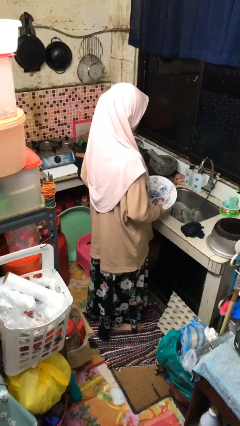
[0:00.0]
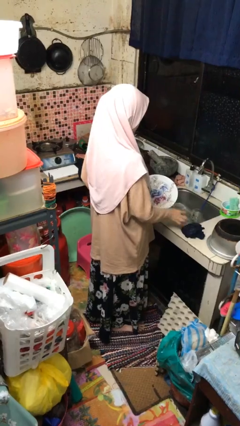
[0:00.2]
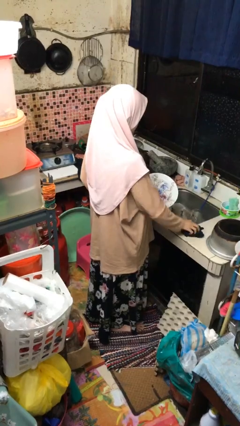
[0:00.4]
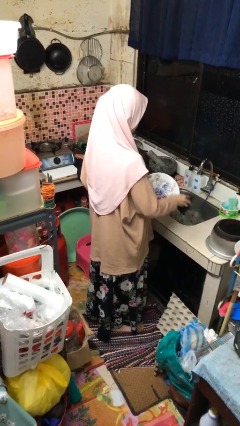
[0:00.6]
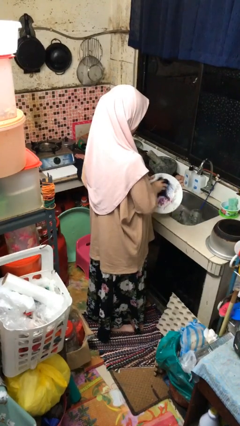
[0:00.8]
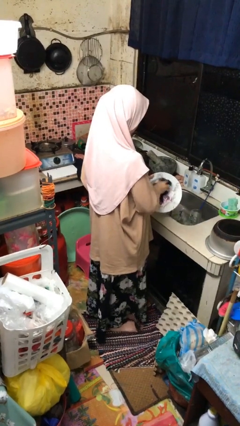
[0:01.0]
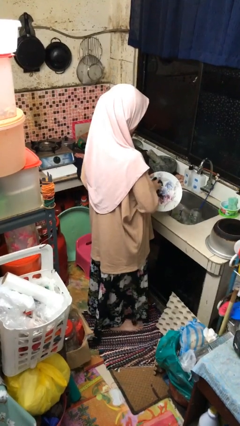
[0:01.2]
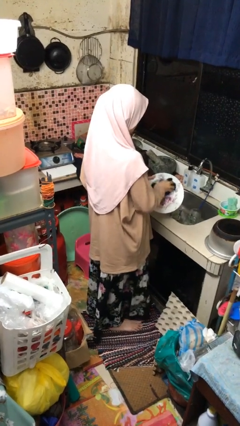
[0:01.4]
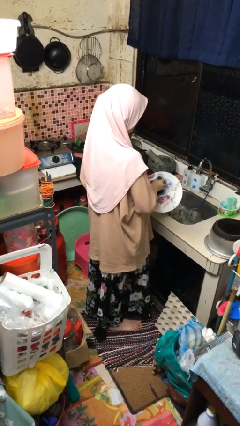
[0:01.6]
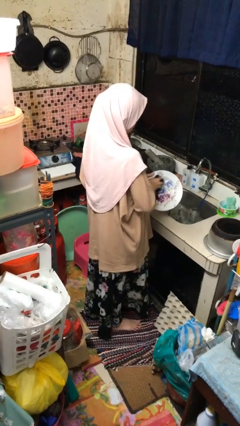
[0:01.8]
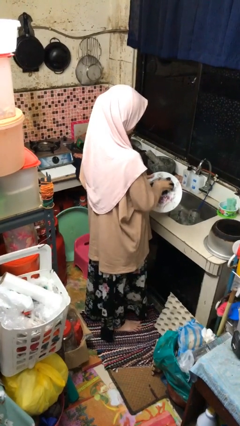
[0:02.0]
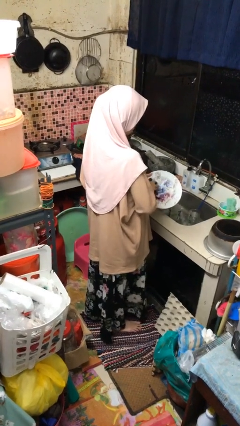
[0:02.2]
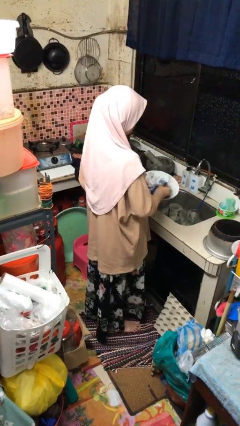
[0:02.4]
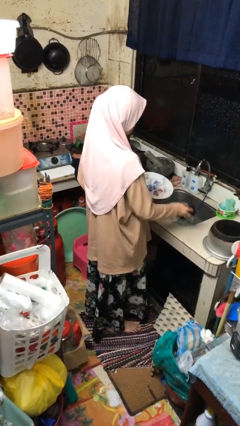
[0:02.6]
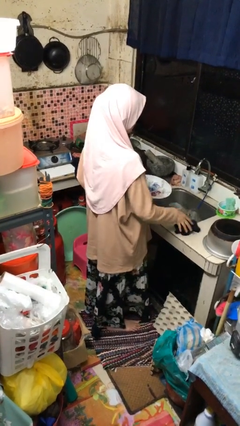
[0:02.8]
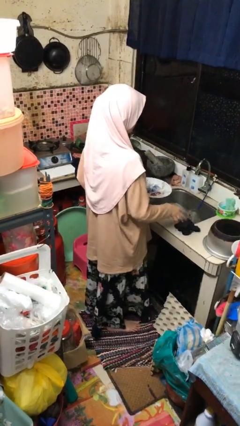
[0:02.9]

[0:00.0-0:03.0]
person dries dish

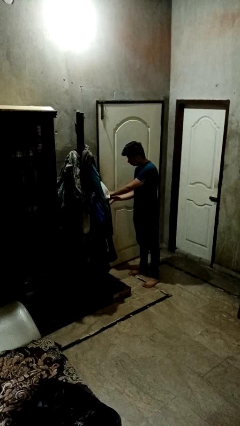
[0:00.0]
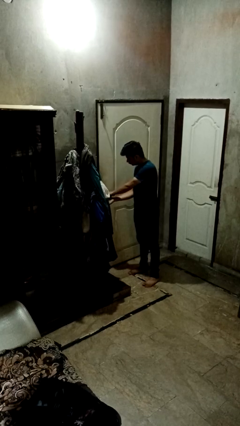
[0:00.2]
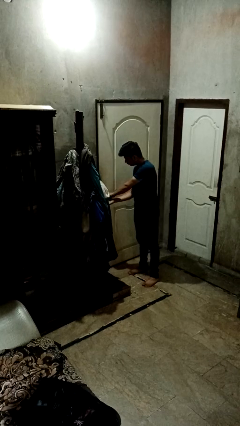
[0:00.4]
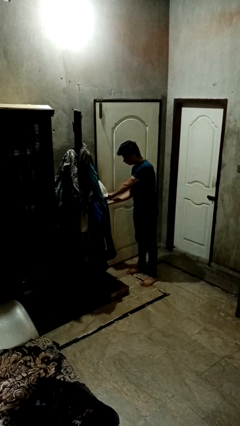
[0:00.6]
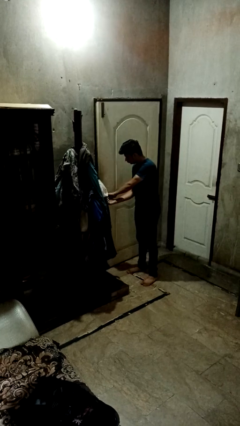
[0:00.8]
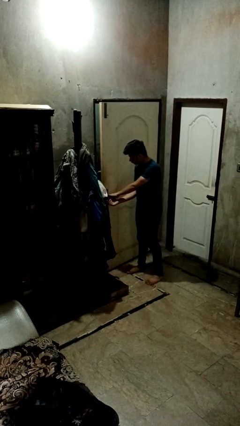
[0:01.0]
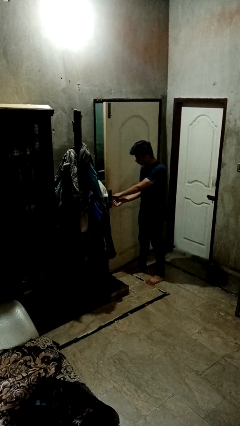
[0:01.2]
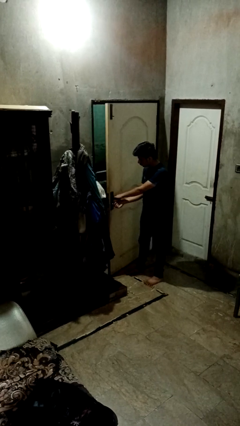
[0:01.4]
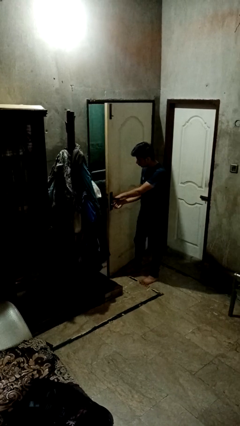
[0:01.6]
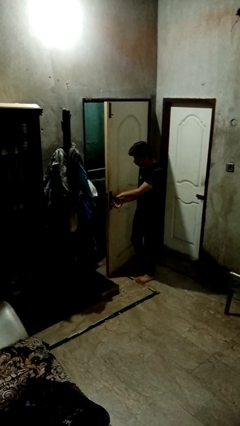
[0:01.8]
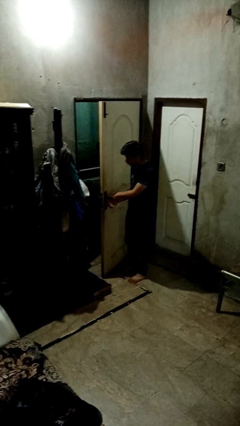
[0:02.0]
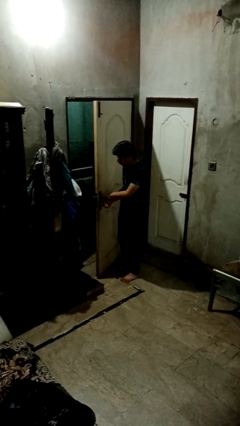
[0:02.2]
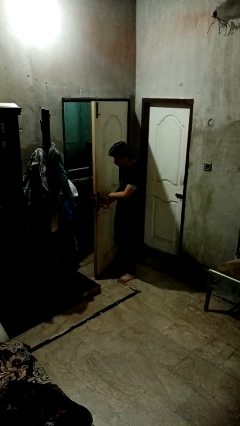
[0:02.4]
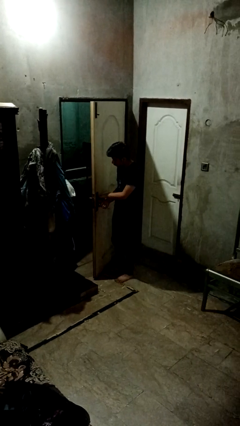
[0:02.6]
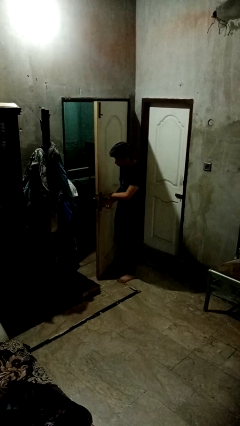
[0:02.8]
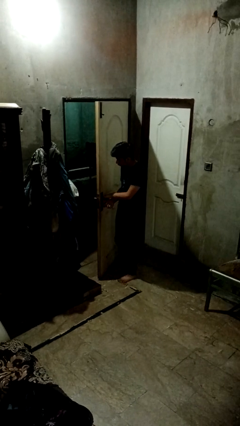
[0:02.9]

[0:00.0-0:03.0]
person opens facility door

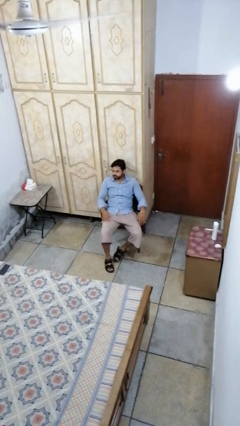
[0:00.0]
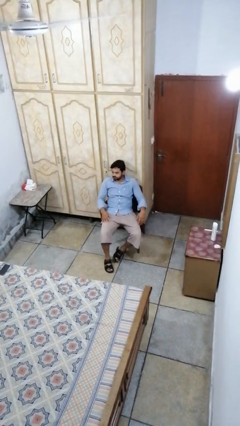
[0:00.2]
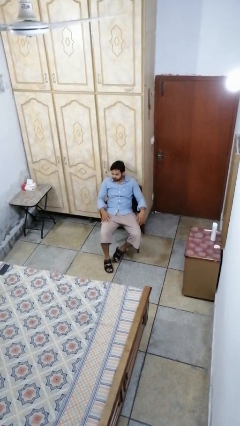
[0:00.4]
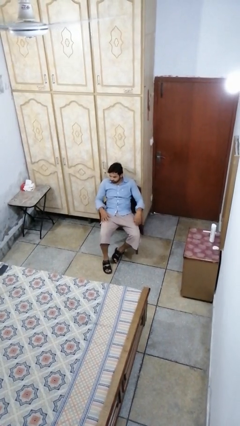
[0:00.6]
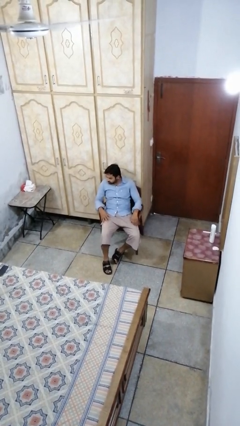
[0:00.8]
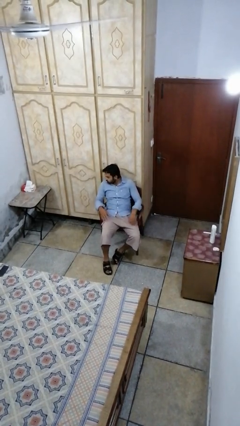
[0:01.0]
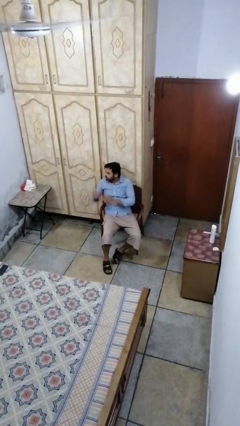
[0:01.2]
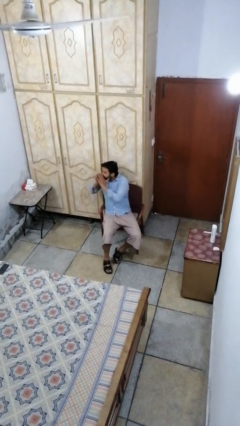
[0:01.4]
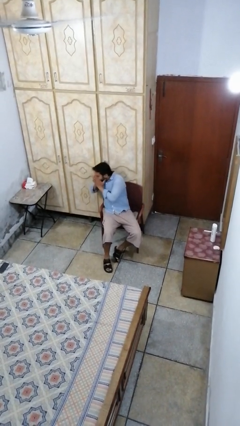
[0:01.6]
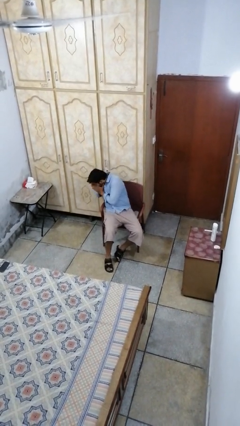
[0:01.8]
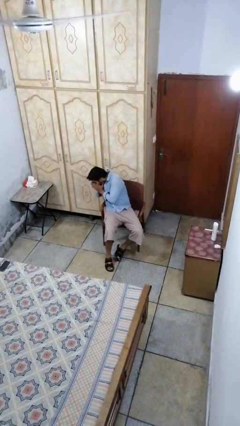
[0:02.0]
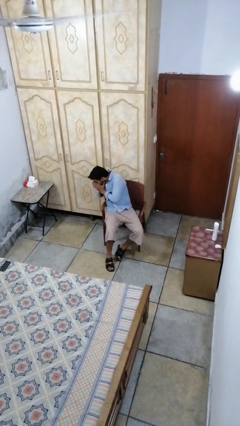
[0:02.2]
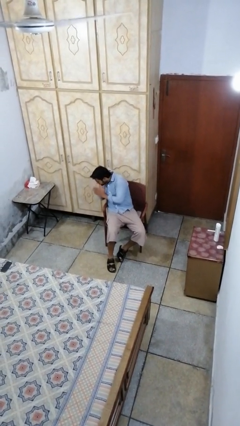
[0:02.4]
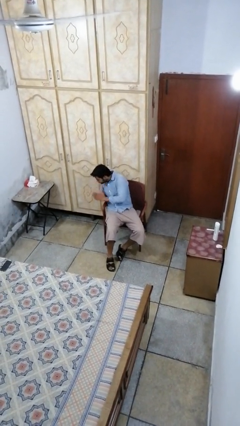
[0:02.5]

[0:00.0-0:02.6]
person sneezes into hand

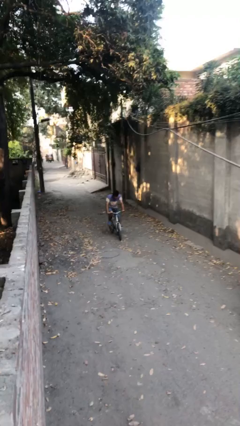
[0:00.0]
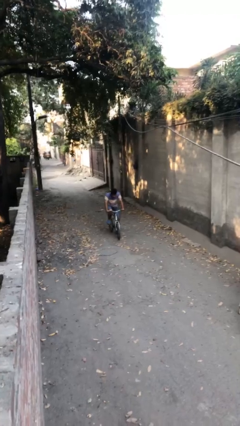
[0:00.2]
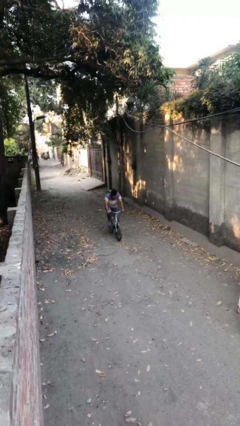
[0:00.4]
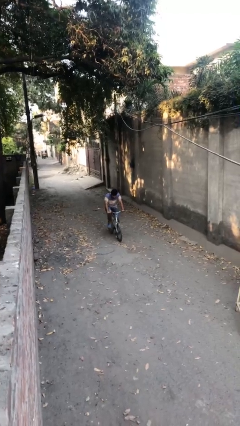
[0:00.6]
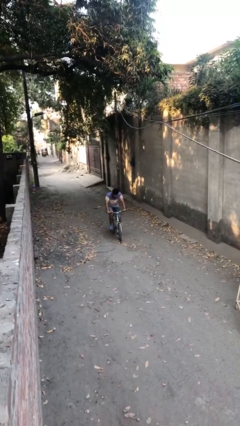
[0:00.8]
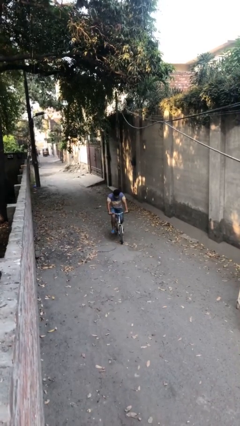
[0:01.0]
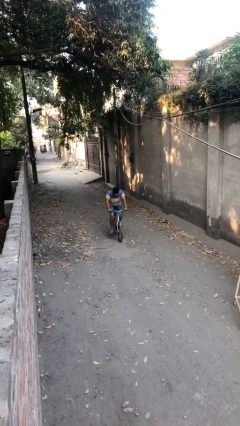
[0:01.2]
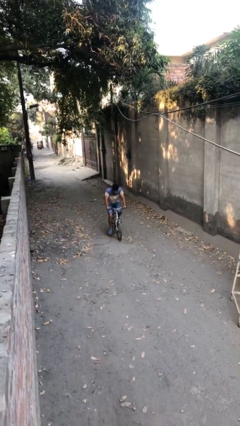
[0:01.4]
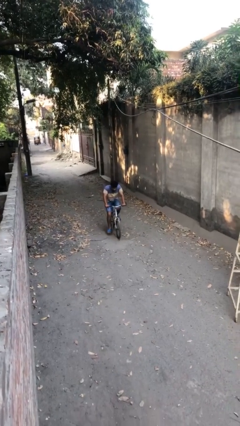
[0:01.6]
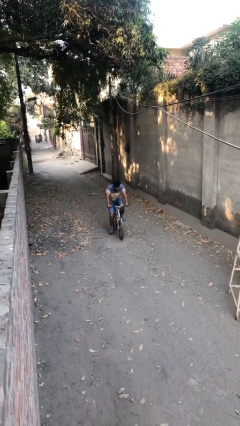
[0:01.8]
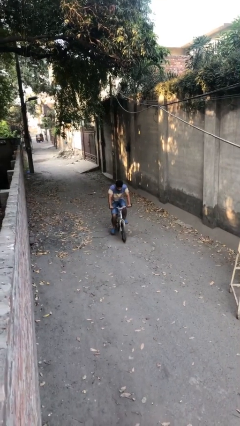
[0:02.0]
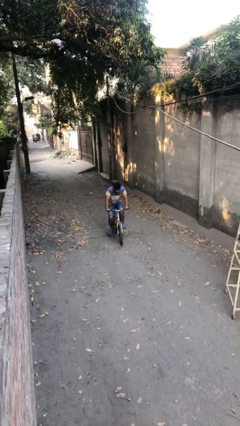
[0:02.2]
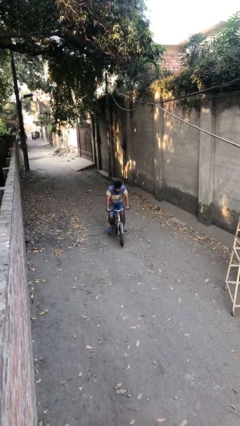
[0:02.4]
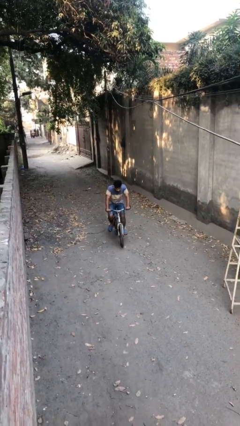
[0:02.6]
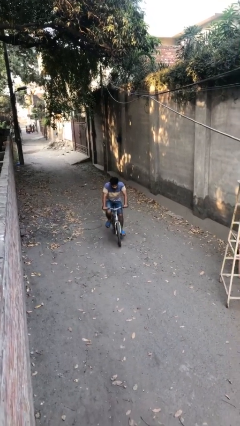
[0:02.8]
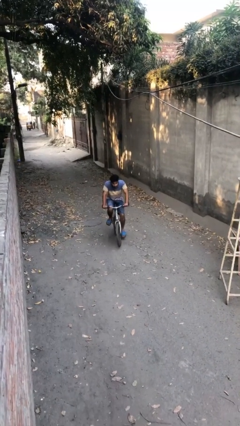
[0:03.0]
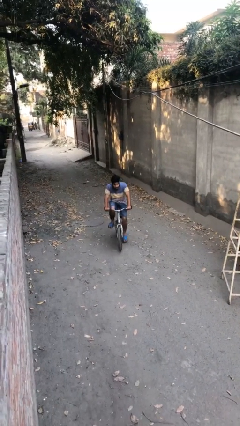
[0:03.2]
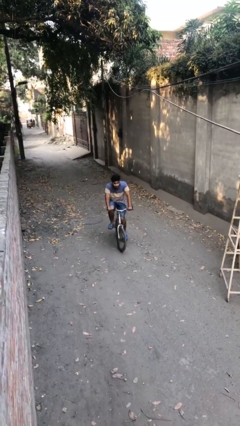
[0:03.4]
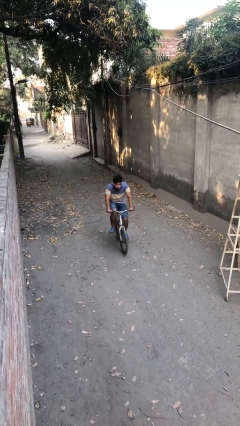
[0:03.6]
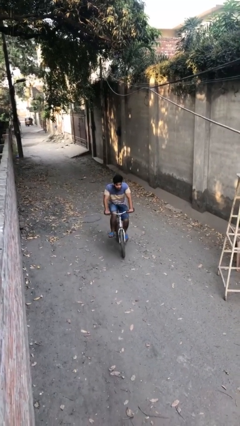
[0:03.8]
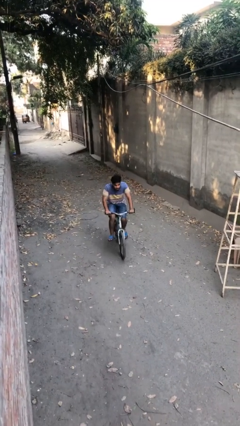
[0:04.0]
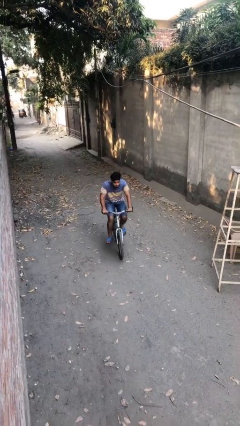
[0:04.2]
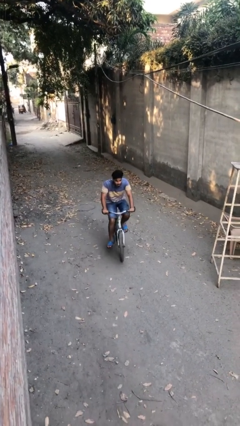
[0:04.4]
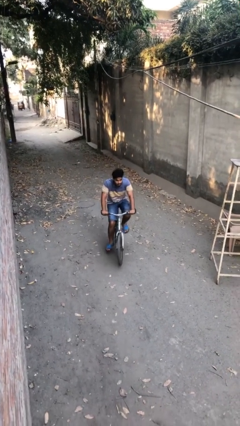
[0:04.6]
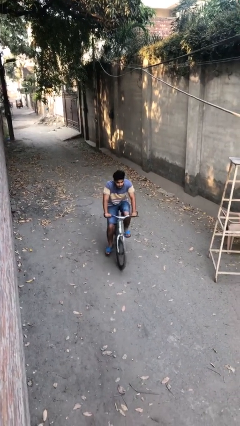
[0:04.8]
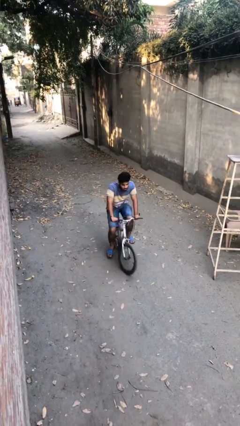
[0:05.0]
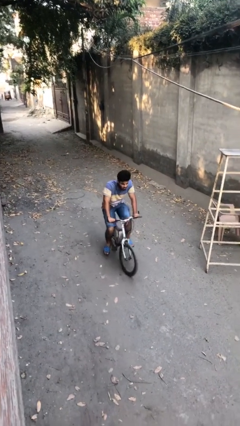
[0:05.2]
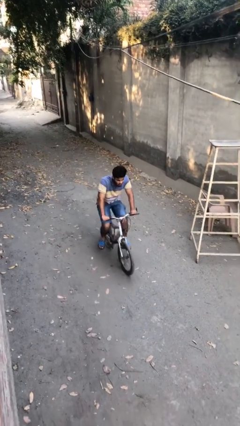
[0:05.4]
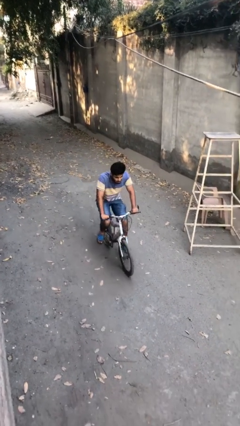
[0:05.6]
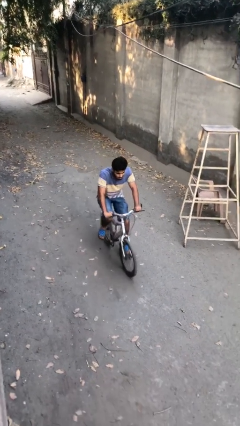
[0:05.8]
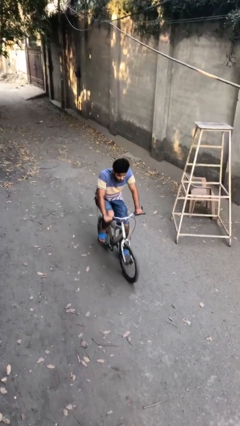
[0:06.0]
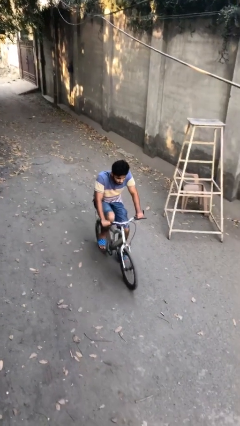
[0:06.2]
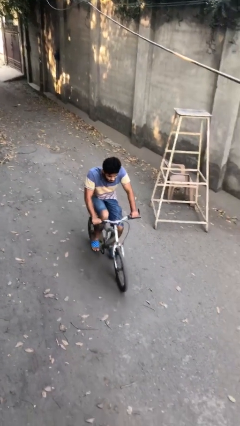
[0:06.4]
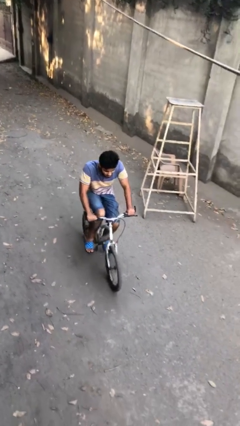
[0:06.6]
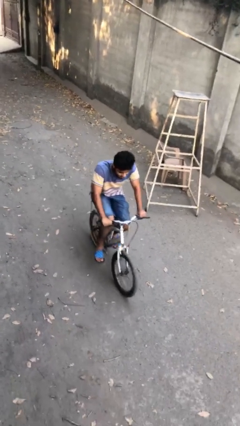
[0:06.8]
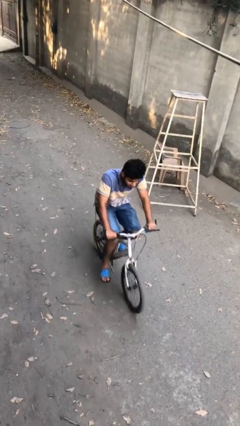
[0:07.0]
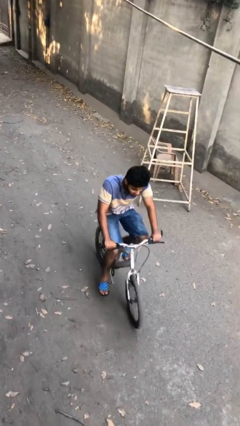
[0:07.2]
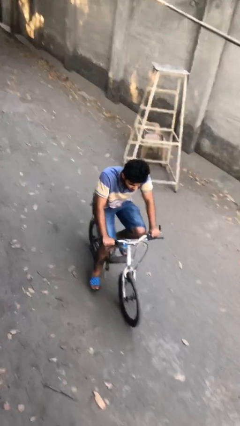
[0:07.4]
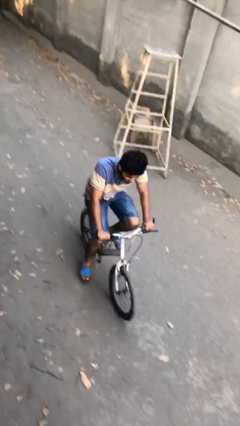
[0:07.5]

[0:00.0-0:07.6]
person rides bicycle

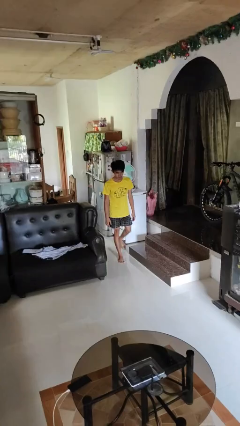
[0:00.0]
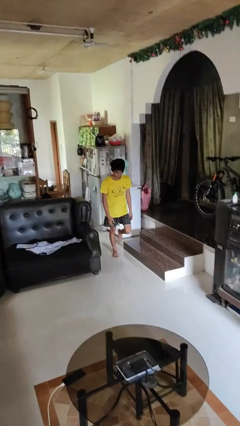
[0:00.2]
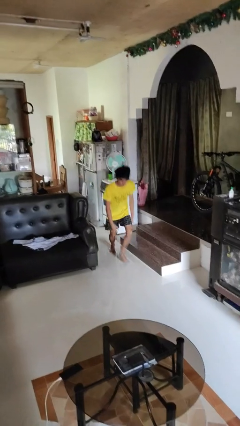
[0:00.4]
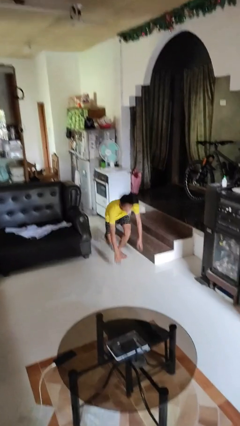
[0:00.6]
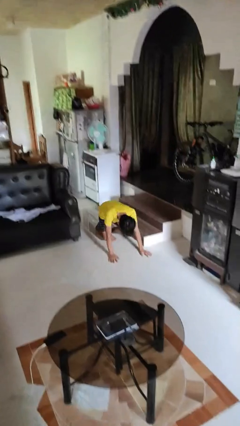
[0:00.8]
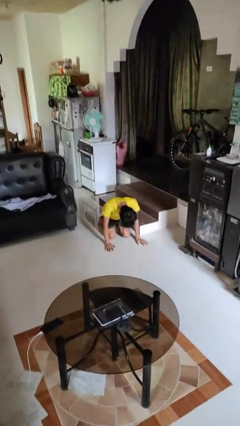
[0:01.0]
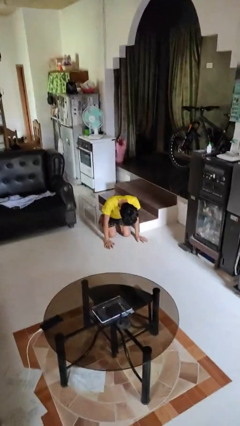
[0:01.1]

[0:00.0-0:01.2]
person trips on object on floor

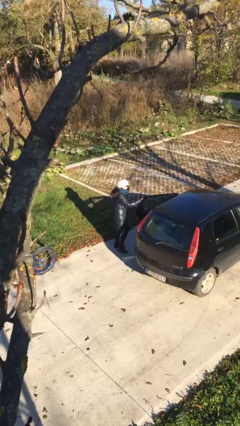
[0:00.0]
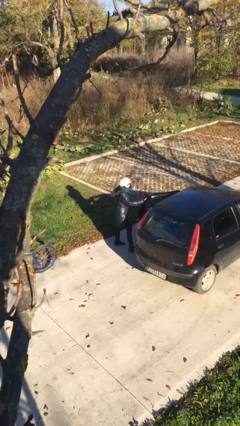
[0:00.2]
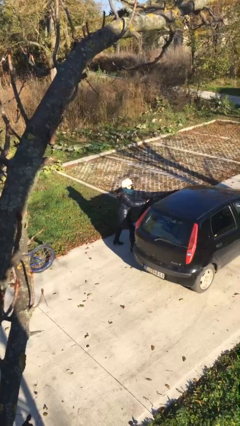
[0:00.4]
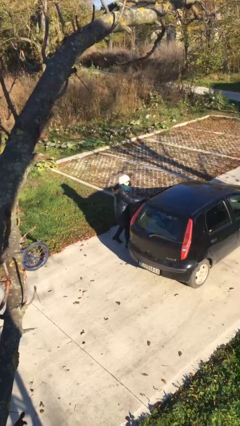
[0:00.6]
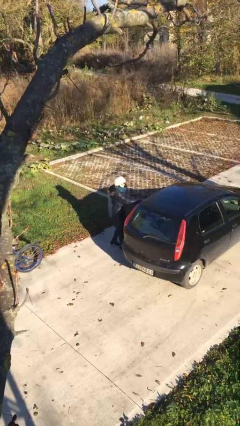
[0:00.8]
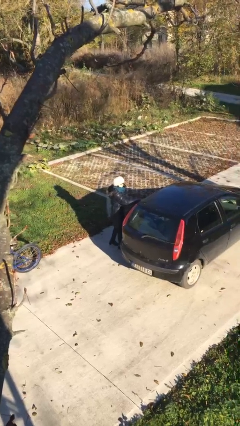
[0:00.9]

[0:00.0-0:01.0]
person closes car door
